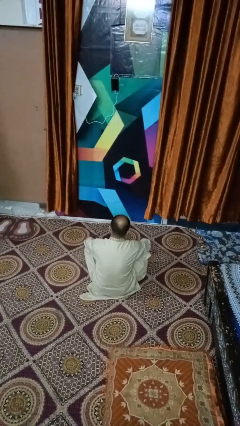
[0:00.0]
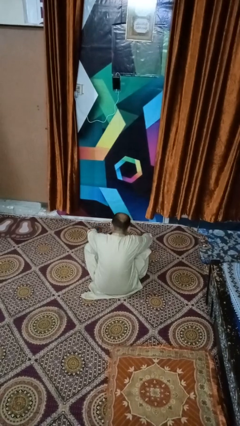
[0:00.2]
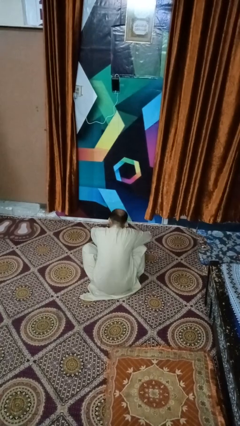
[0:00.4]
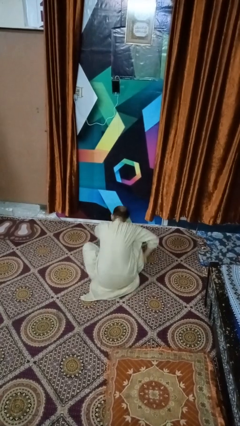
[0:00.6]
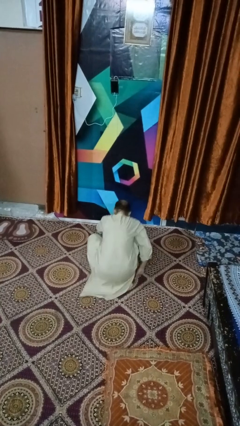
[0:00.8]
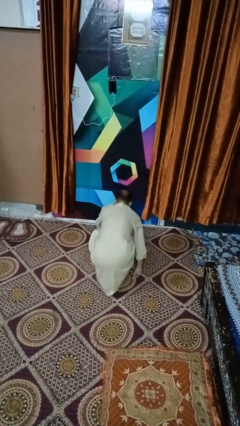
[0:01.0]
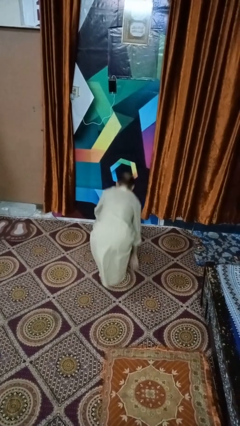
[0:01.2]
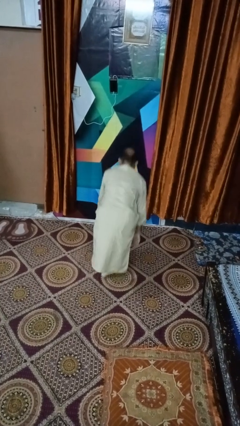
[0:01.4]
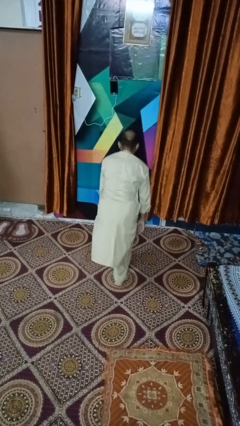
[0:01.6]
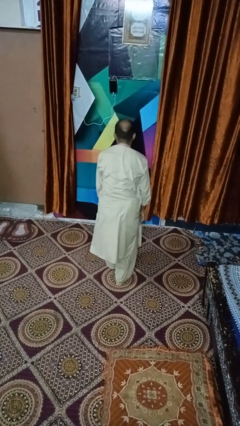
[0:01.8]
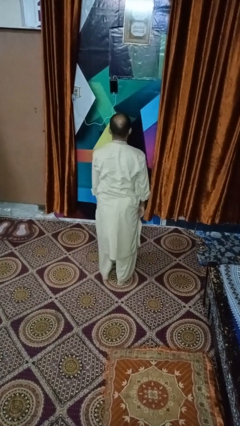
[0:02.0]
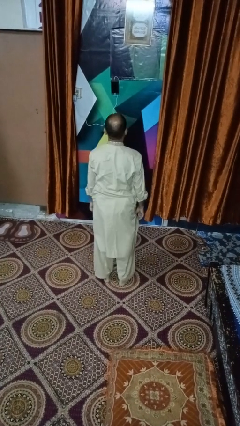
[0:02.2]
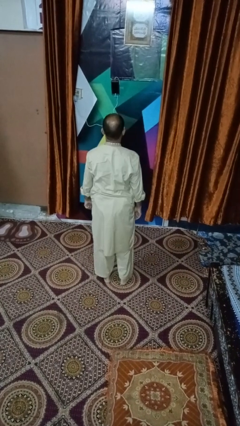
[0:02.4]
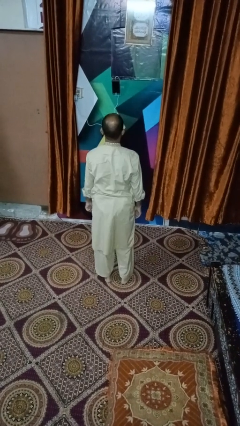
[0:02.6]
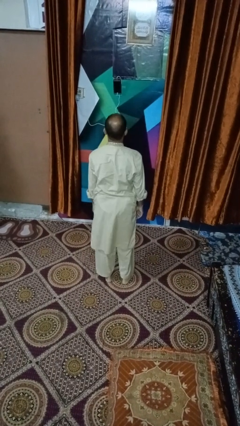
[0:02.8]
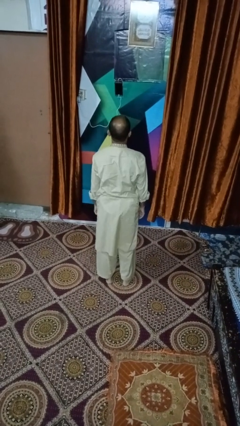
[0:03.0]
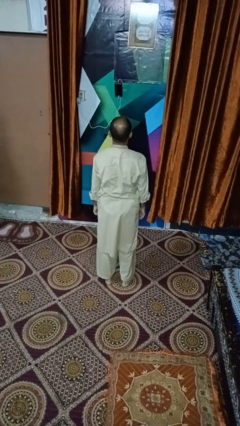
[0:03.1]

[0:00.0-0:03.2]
person stands up from floor

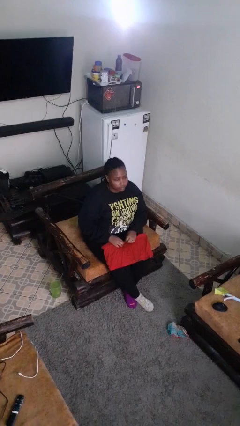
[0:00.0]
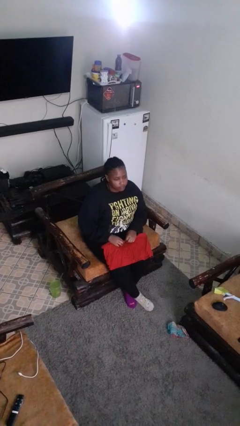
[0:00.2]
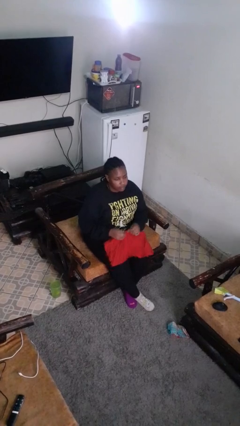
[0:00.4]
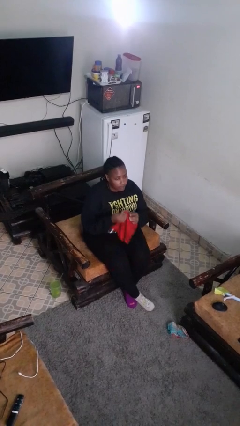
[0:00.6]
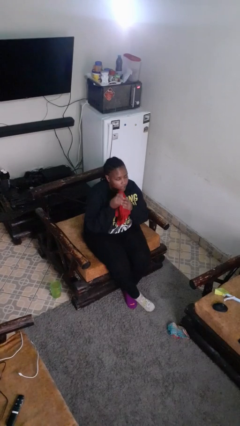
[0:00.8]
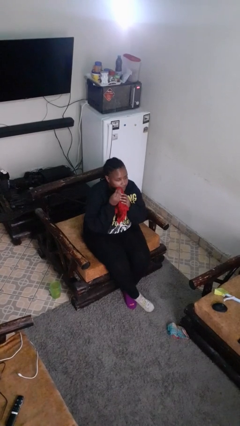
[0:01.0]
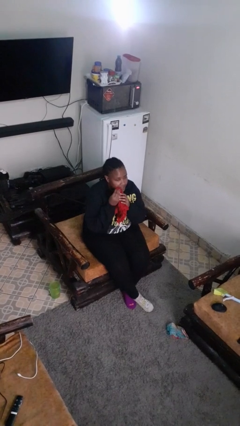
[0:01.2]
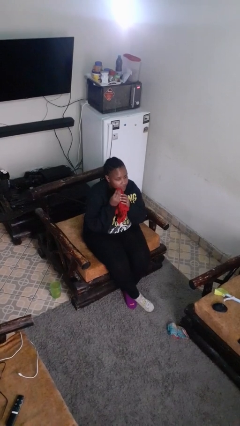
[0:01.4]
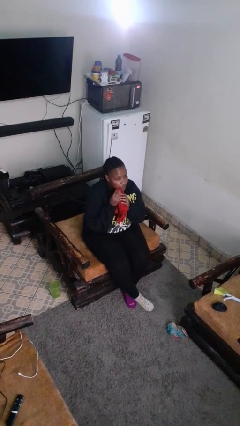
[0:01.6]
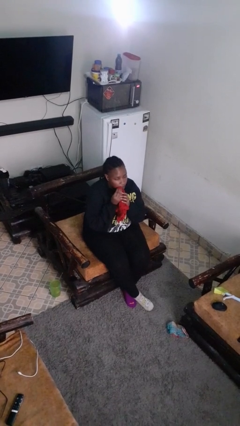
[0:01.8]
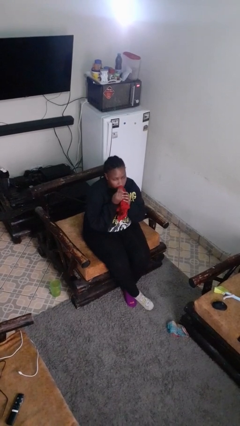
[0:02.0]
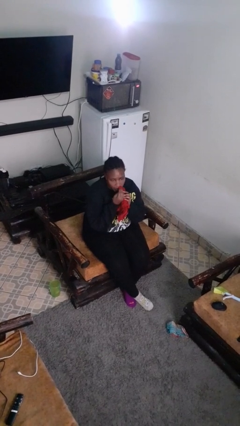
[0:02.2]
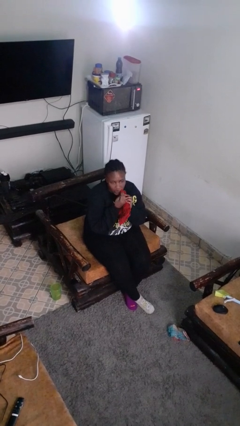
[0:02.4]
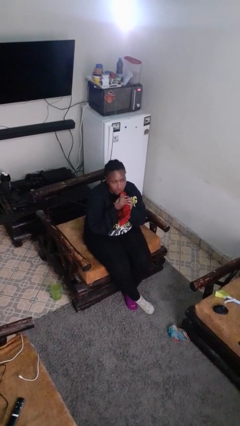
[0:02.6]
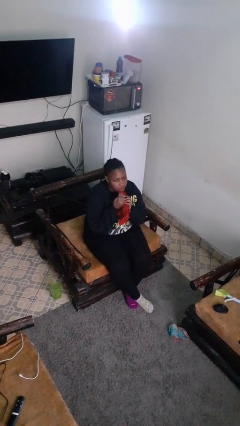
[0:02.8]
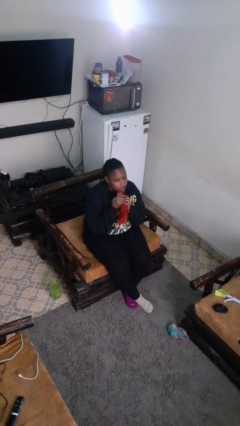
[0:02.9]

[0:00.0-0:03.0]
person wipes mouth with napkin

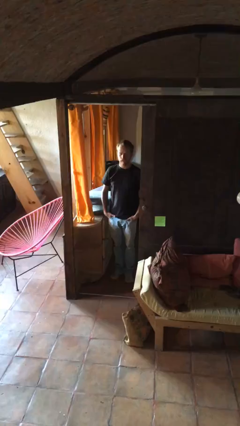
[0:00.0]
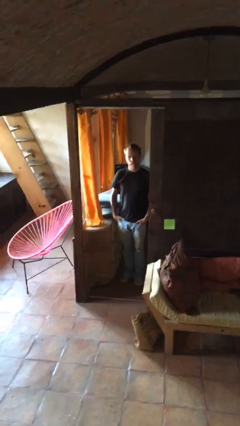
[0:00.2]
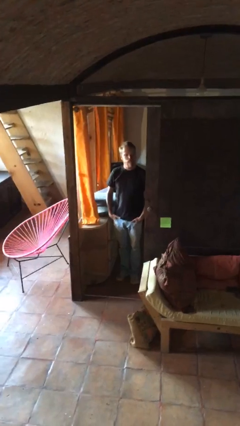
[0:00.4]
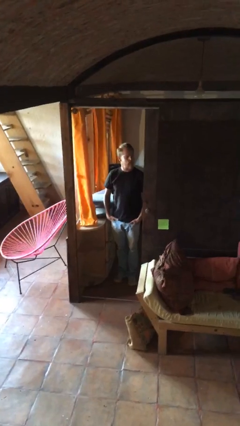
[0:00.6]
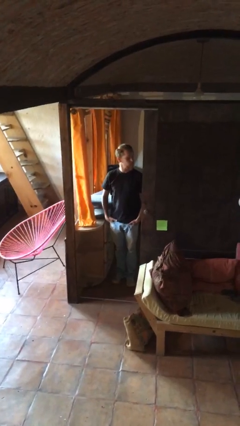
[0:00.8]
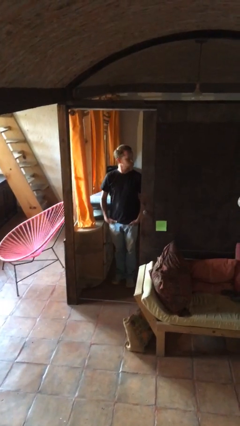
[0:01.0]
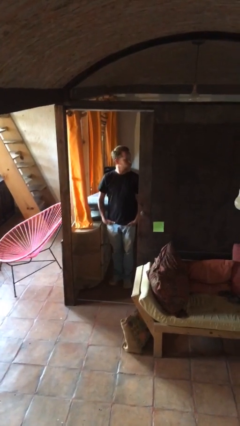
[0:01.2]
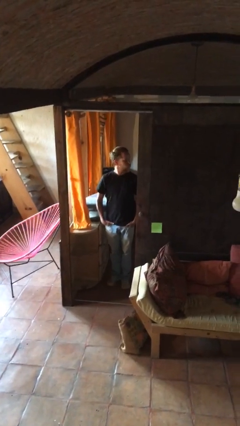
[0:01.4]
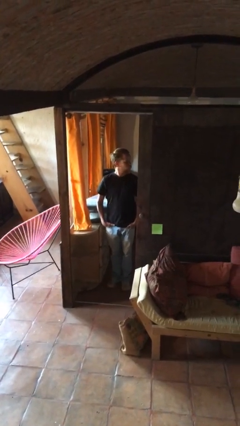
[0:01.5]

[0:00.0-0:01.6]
person bumps into wall

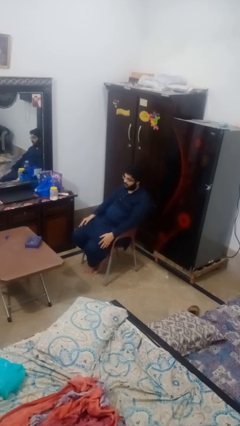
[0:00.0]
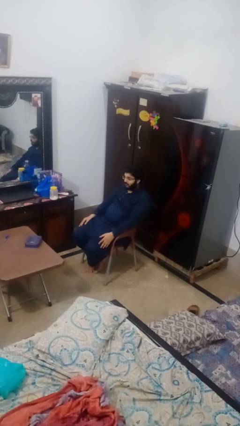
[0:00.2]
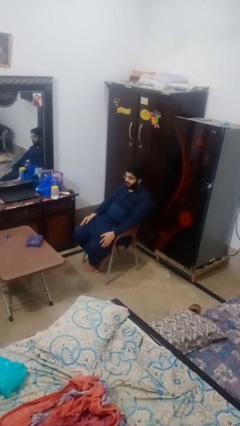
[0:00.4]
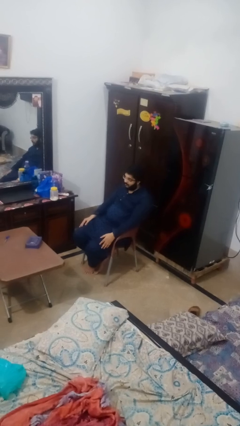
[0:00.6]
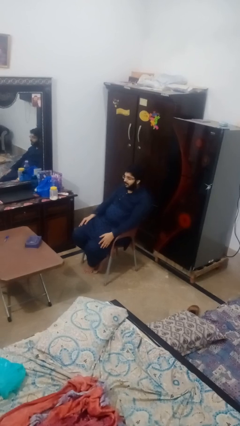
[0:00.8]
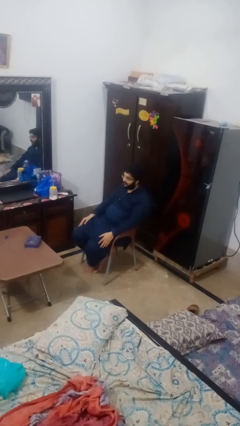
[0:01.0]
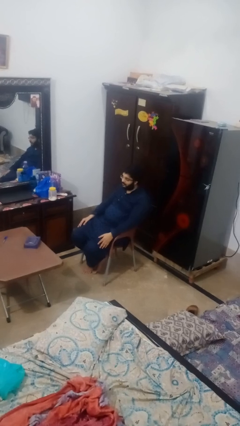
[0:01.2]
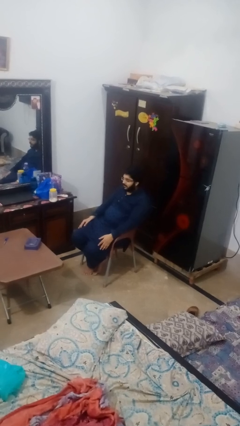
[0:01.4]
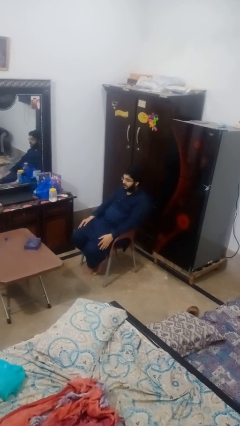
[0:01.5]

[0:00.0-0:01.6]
person shakes head

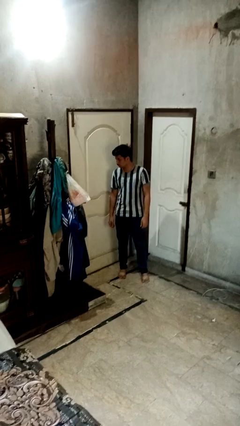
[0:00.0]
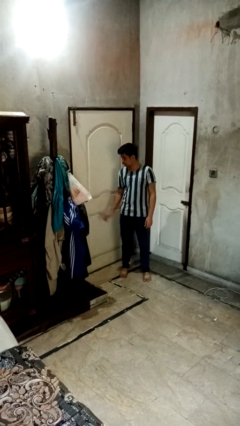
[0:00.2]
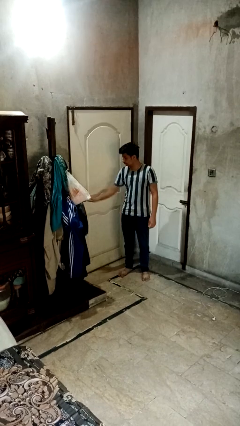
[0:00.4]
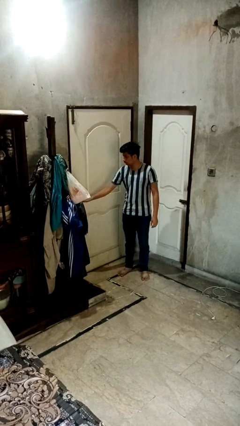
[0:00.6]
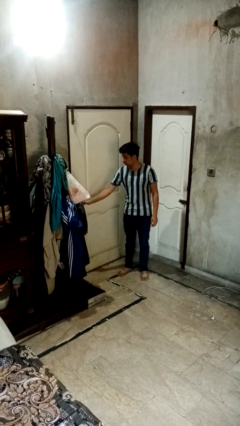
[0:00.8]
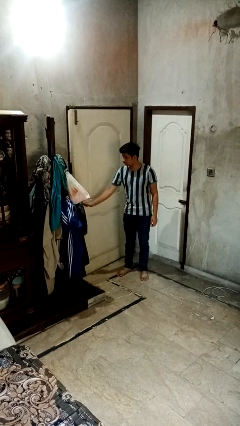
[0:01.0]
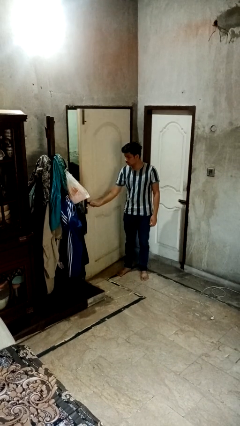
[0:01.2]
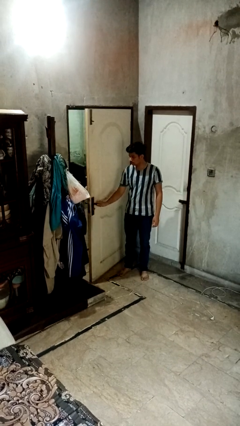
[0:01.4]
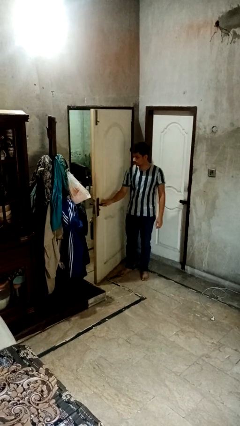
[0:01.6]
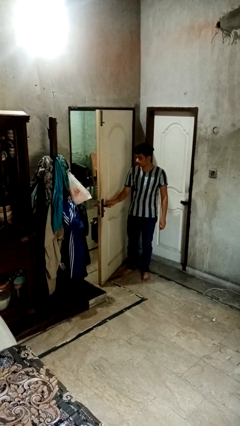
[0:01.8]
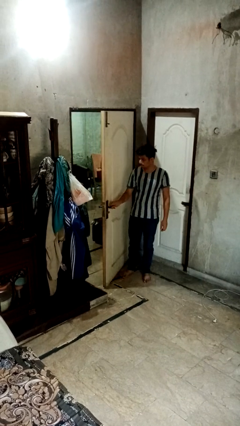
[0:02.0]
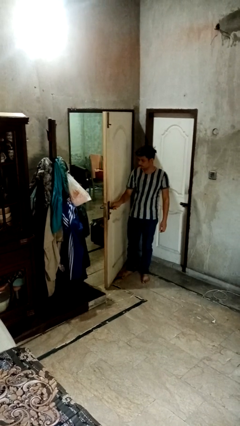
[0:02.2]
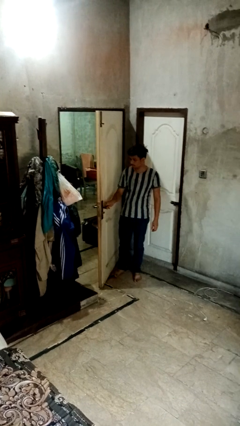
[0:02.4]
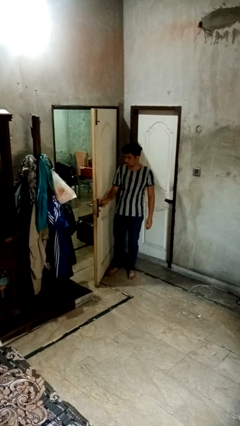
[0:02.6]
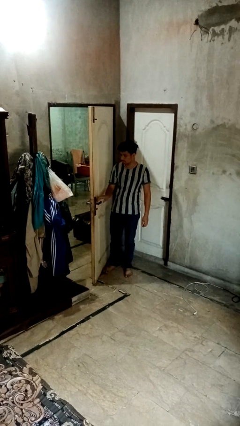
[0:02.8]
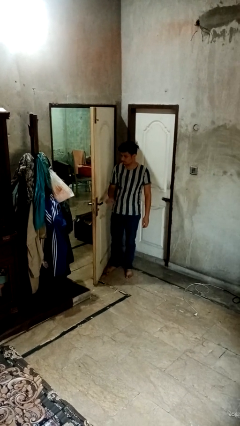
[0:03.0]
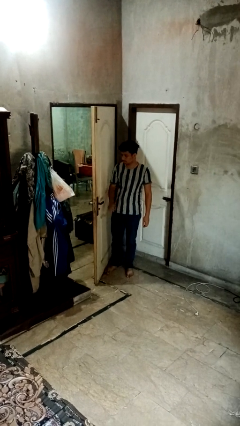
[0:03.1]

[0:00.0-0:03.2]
person opens facility door

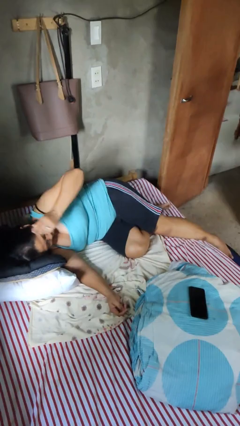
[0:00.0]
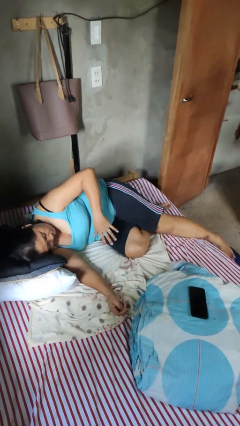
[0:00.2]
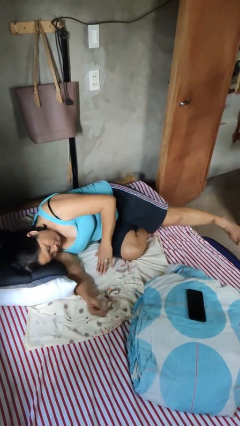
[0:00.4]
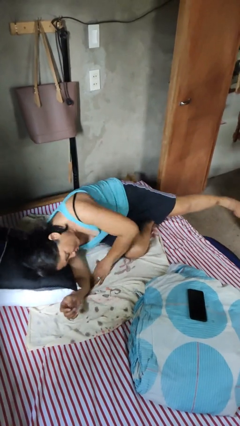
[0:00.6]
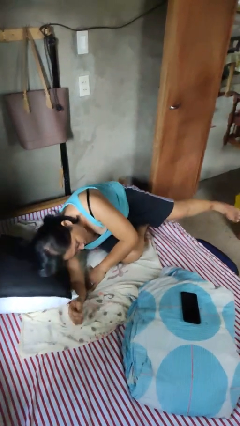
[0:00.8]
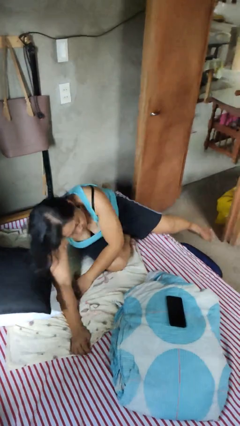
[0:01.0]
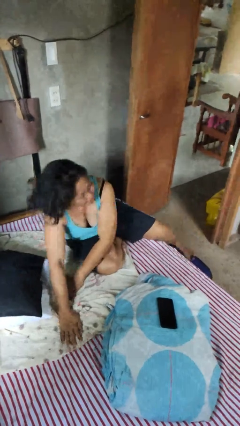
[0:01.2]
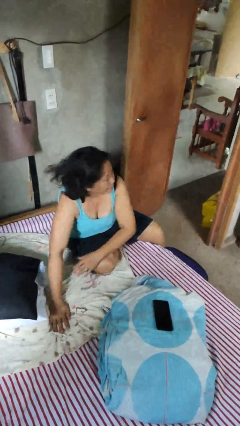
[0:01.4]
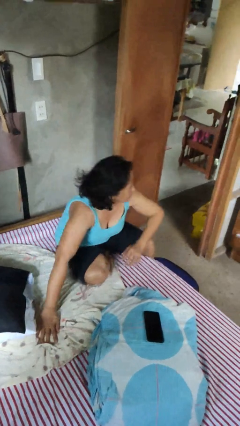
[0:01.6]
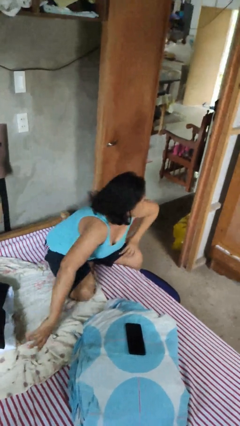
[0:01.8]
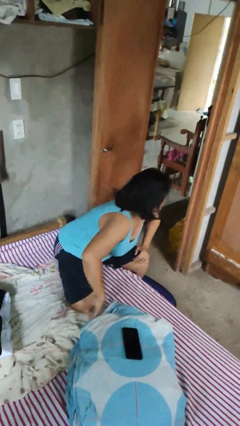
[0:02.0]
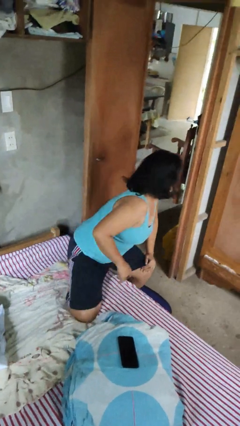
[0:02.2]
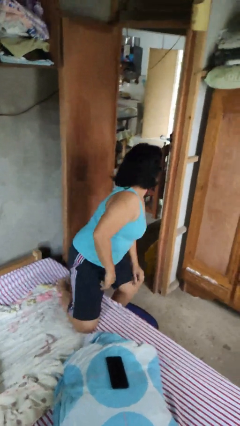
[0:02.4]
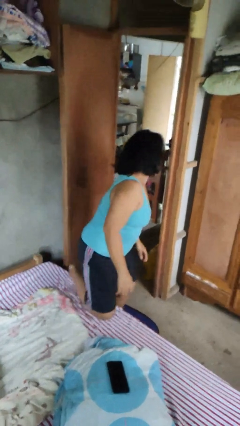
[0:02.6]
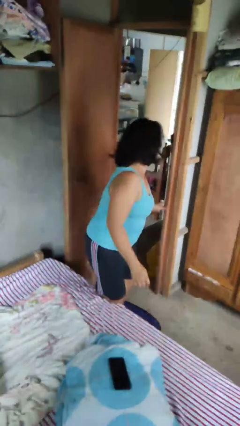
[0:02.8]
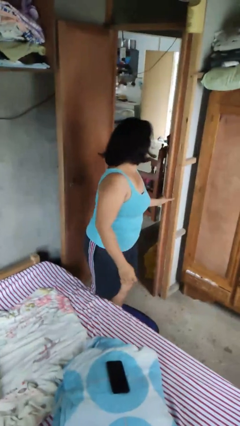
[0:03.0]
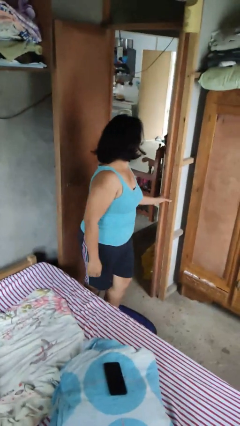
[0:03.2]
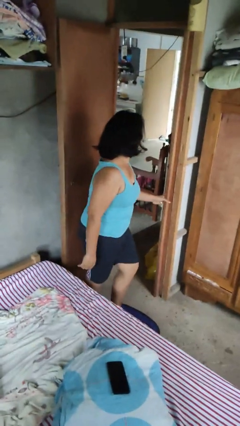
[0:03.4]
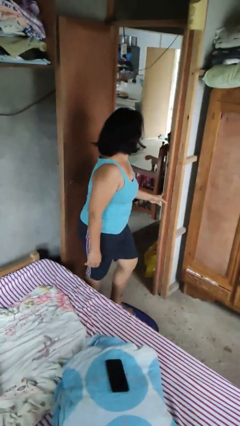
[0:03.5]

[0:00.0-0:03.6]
person stands up

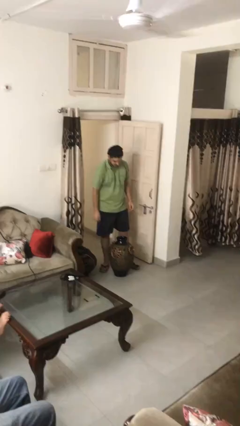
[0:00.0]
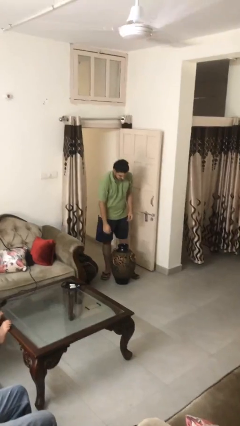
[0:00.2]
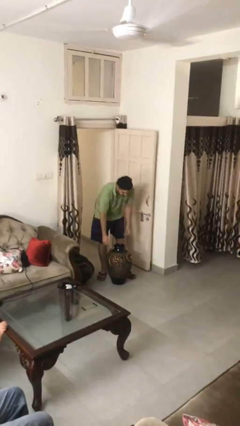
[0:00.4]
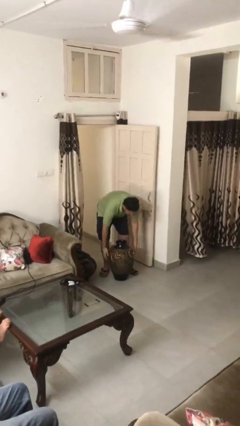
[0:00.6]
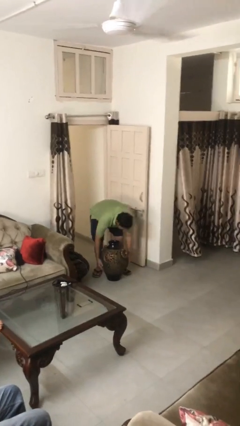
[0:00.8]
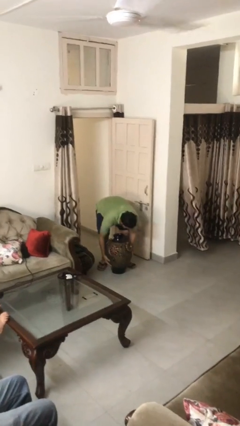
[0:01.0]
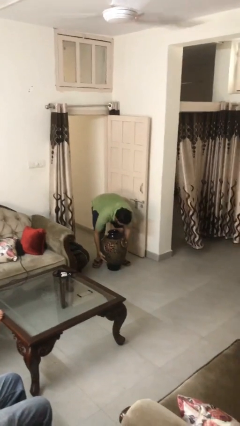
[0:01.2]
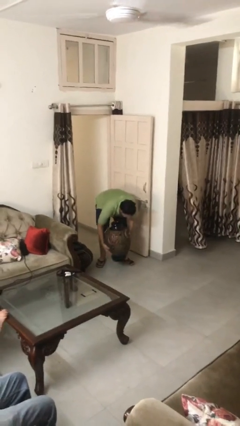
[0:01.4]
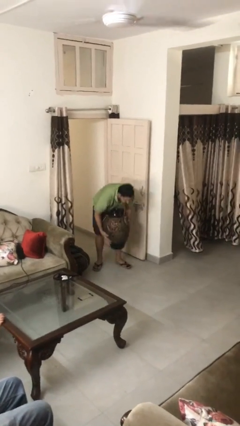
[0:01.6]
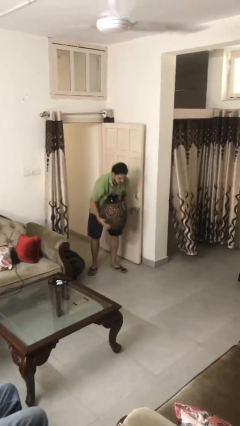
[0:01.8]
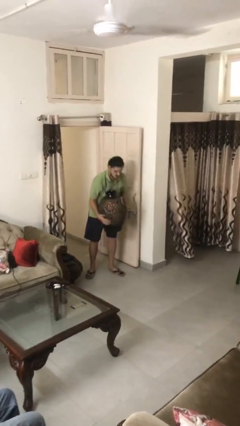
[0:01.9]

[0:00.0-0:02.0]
person picks up object from floor
